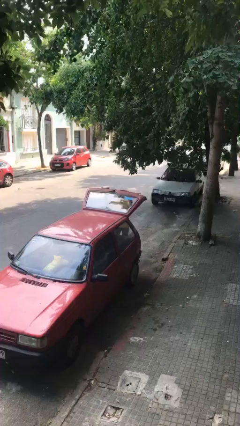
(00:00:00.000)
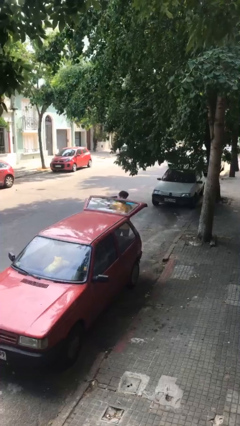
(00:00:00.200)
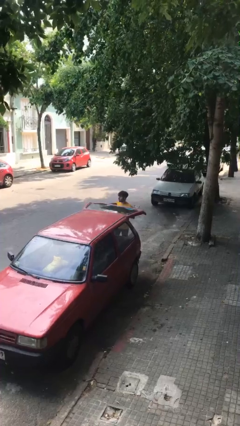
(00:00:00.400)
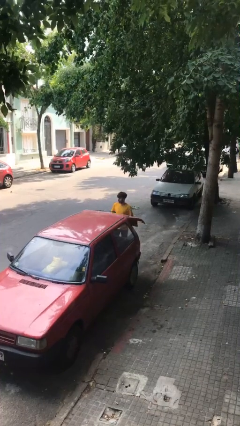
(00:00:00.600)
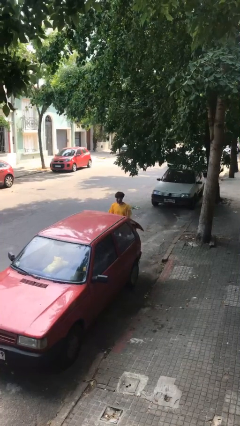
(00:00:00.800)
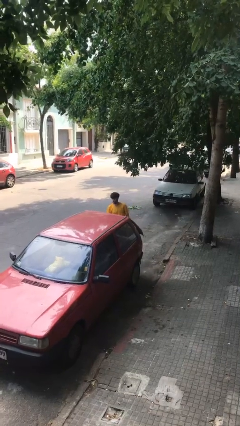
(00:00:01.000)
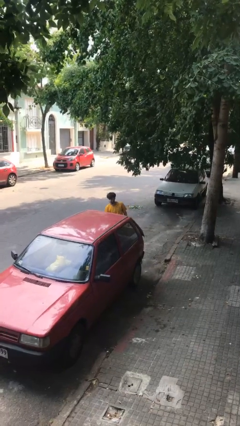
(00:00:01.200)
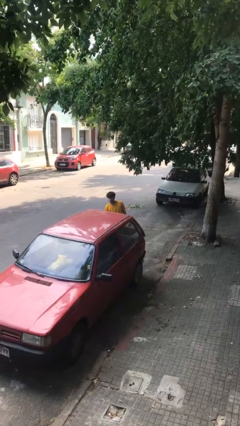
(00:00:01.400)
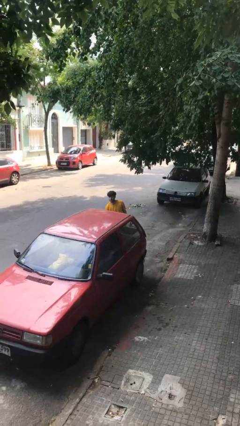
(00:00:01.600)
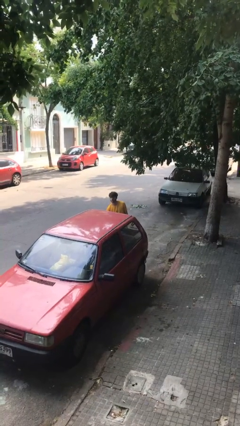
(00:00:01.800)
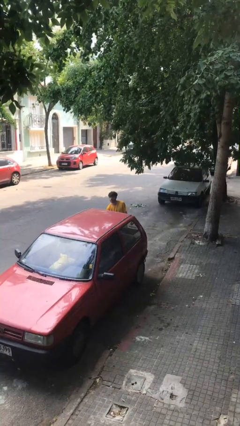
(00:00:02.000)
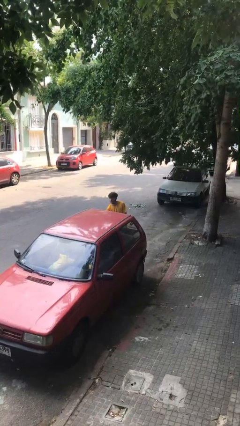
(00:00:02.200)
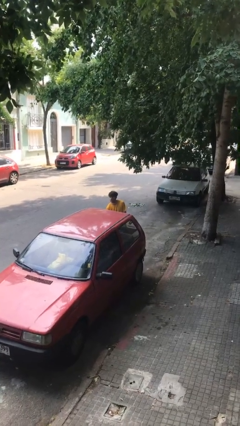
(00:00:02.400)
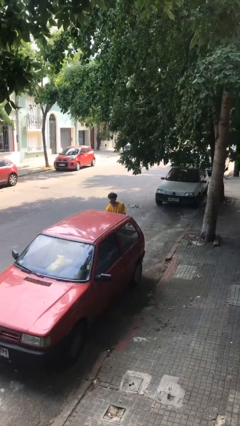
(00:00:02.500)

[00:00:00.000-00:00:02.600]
person closes car trunk

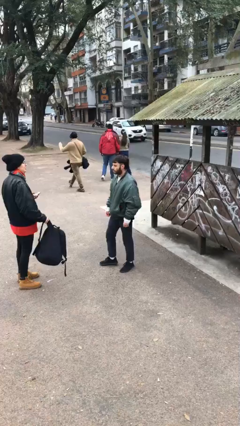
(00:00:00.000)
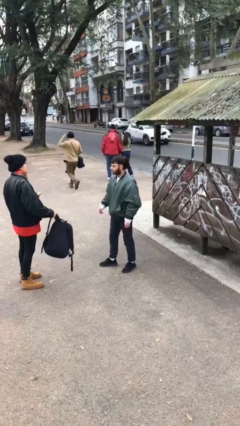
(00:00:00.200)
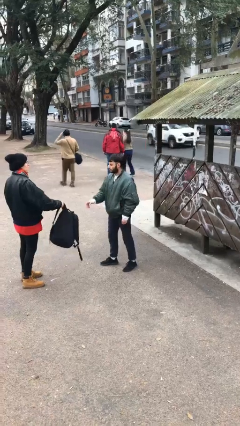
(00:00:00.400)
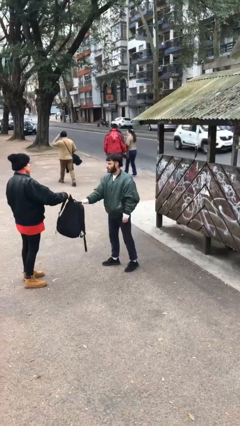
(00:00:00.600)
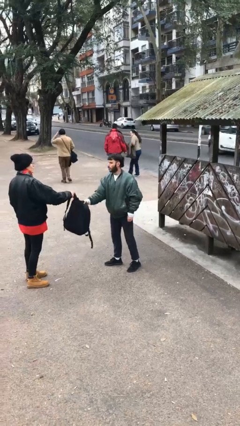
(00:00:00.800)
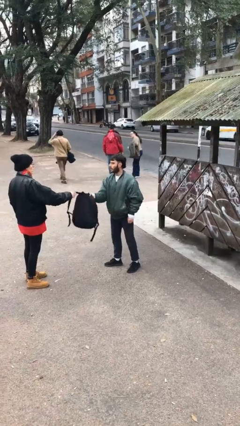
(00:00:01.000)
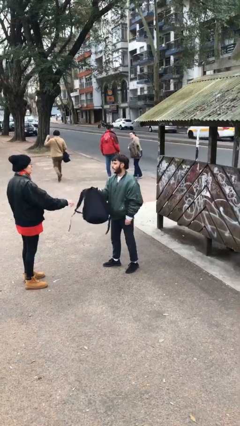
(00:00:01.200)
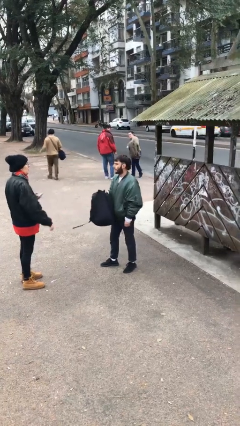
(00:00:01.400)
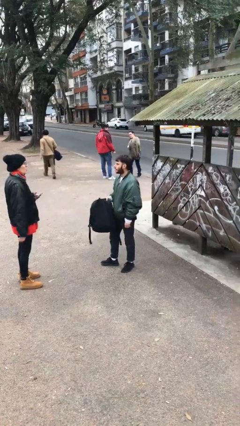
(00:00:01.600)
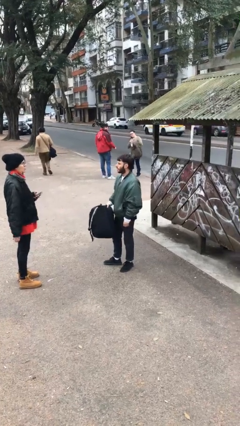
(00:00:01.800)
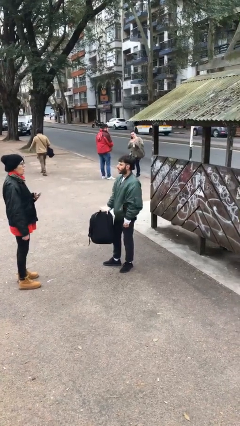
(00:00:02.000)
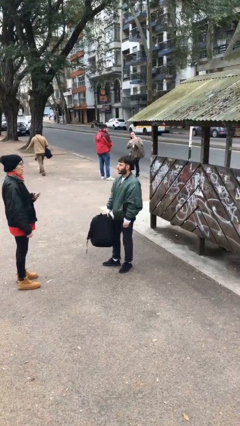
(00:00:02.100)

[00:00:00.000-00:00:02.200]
person transfers object to person

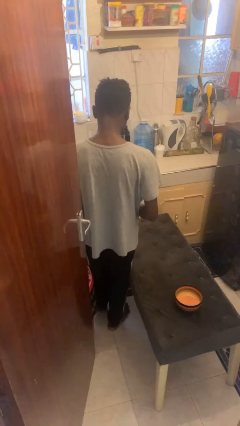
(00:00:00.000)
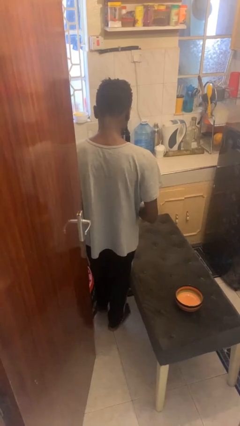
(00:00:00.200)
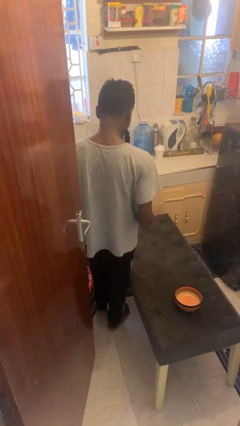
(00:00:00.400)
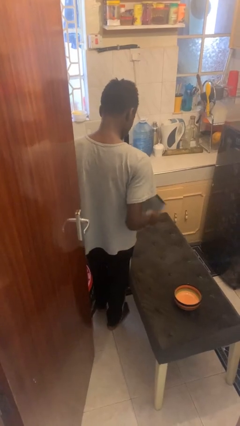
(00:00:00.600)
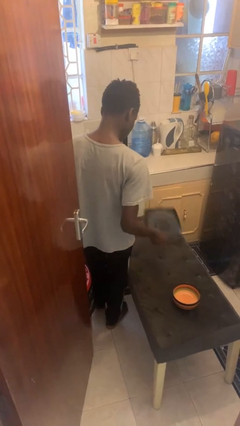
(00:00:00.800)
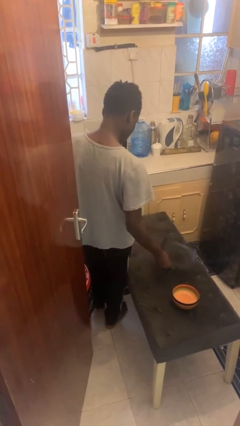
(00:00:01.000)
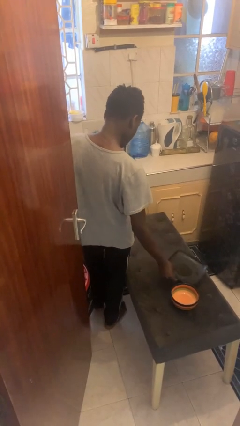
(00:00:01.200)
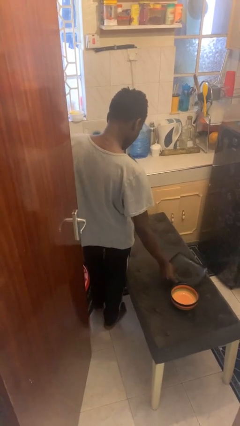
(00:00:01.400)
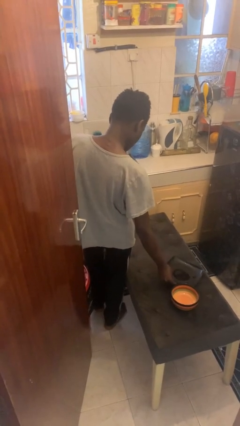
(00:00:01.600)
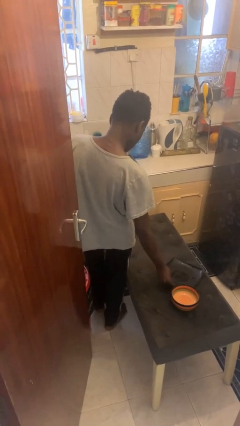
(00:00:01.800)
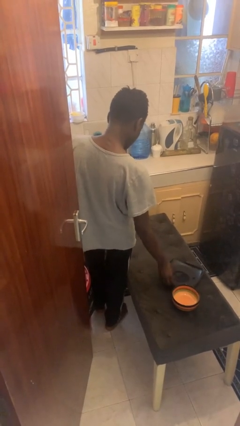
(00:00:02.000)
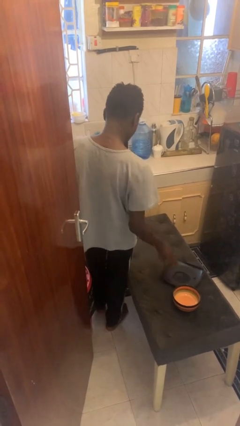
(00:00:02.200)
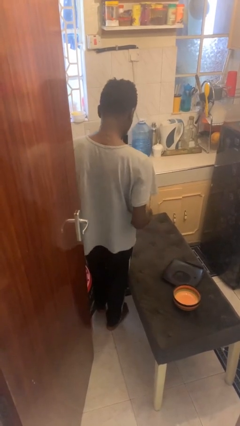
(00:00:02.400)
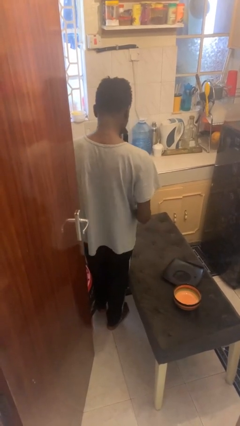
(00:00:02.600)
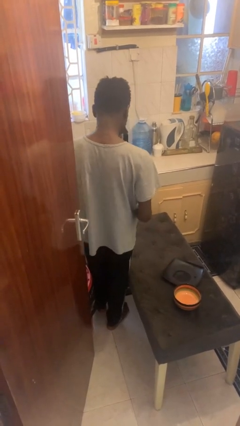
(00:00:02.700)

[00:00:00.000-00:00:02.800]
person sets table

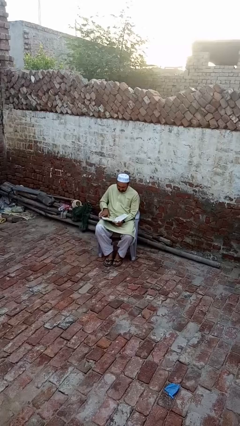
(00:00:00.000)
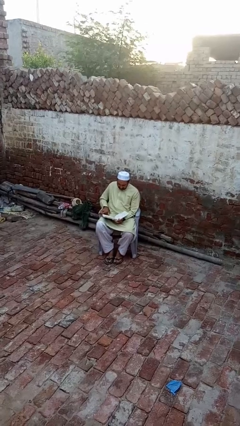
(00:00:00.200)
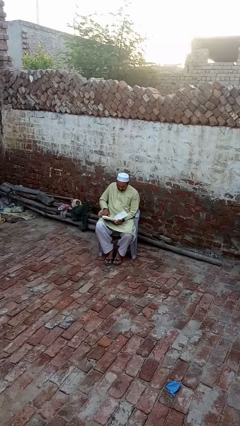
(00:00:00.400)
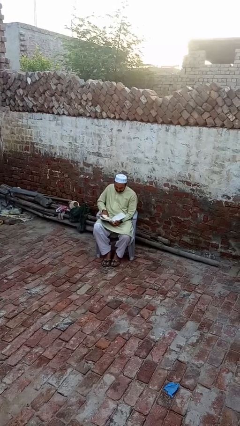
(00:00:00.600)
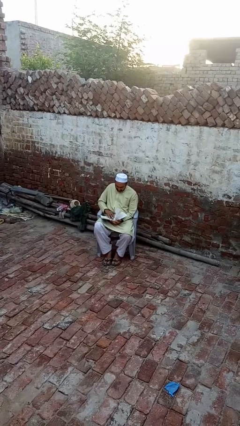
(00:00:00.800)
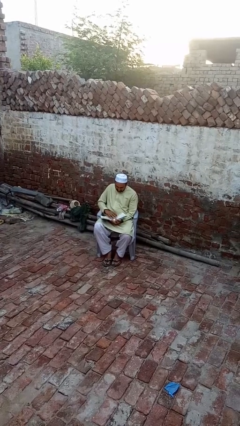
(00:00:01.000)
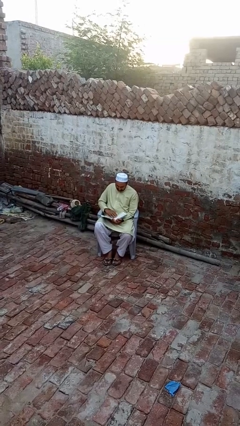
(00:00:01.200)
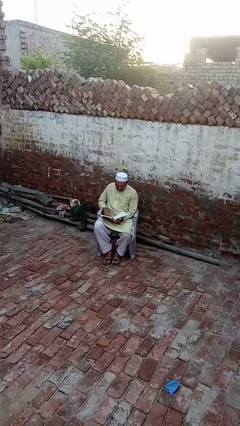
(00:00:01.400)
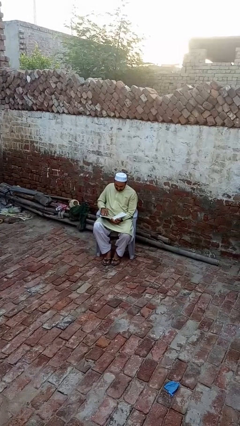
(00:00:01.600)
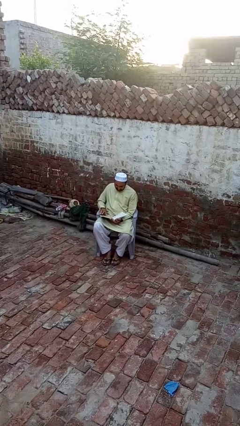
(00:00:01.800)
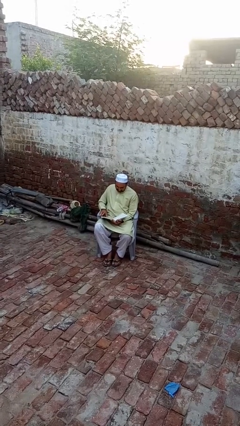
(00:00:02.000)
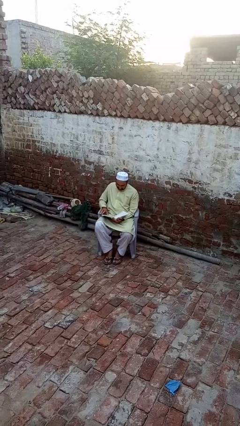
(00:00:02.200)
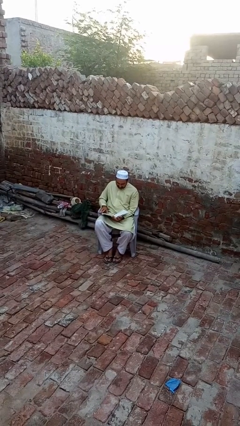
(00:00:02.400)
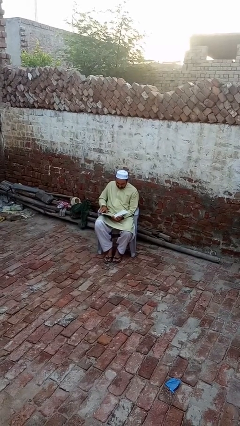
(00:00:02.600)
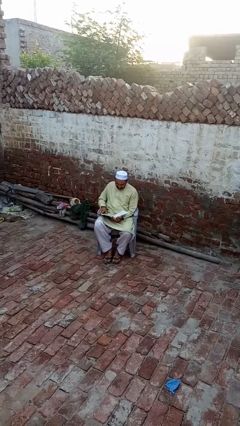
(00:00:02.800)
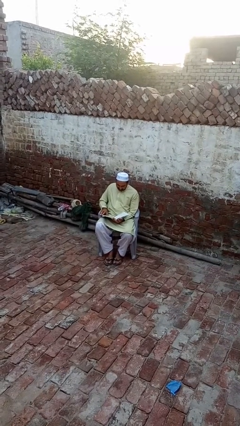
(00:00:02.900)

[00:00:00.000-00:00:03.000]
person reads book

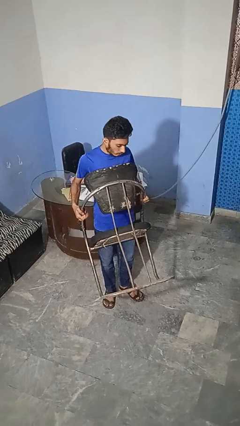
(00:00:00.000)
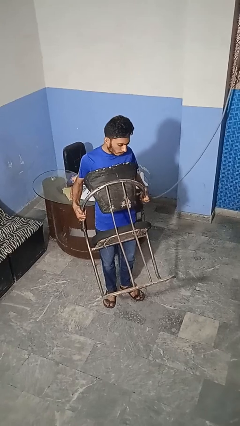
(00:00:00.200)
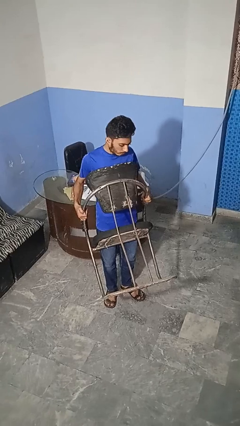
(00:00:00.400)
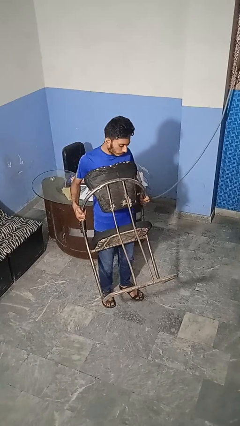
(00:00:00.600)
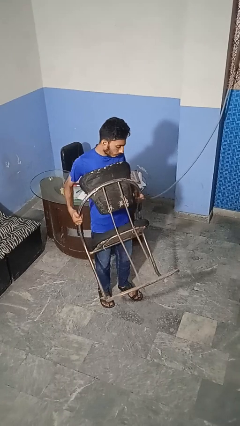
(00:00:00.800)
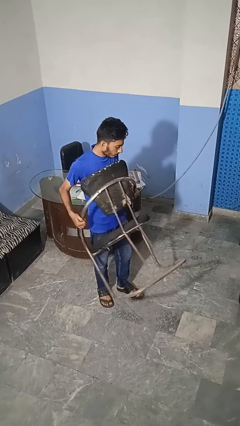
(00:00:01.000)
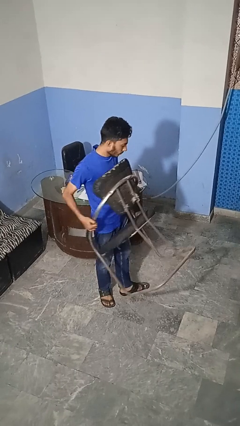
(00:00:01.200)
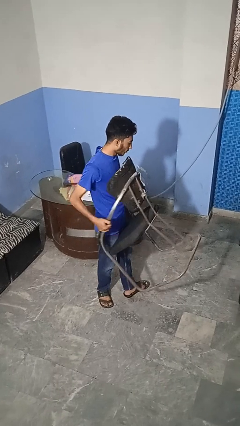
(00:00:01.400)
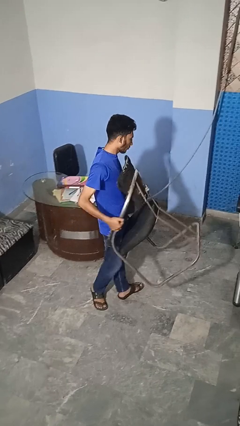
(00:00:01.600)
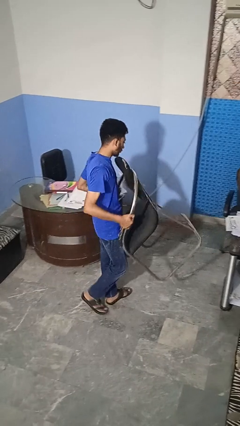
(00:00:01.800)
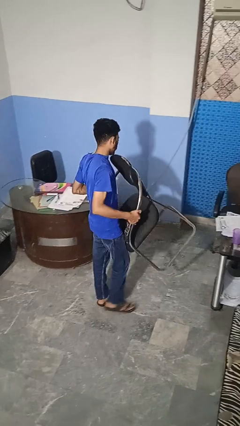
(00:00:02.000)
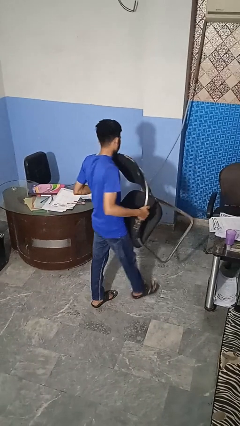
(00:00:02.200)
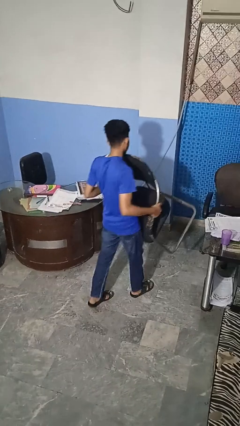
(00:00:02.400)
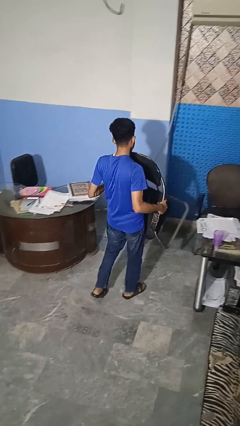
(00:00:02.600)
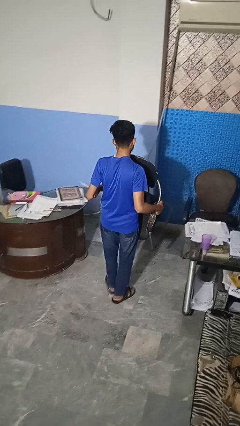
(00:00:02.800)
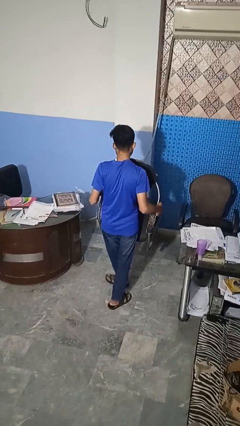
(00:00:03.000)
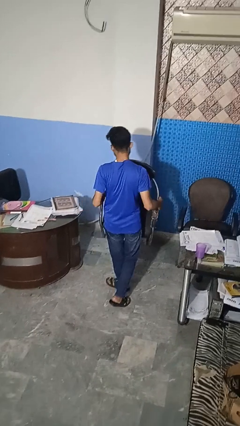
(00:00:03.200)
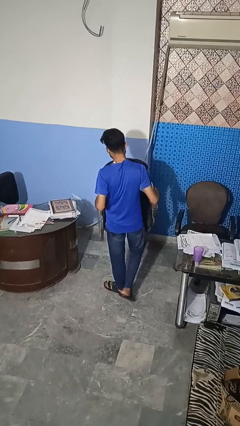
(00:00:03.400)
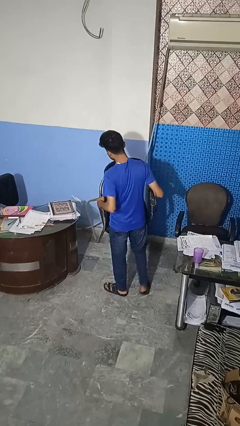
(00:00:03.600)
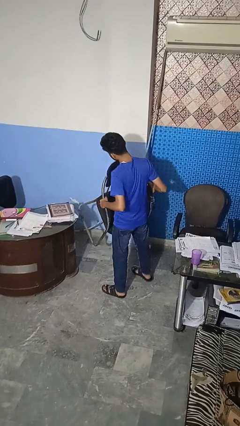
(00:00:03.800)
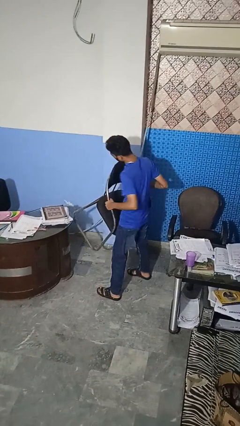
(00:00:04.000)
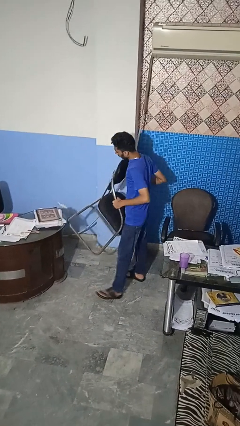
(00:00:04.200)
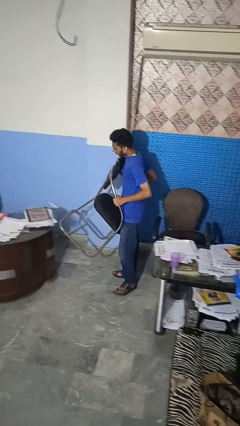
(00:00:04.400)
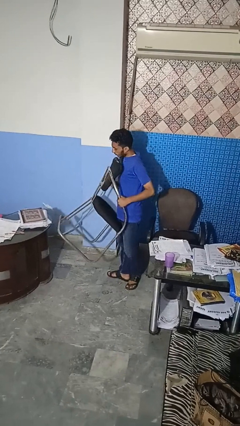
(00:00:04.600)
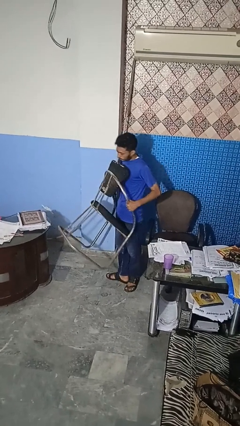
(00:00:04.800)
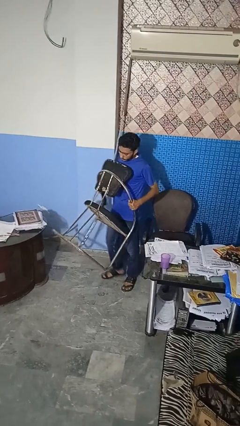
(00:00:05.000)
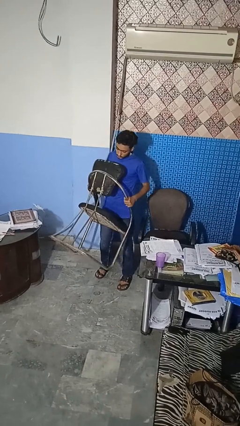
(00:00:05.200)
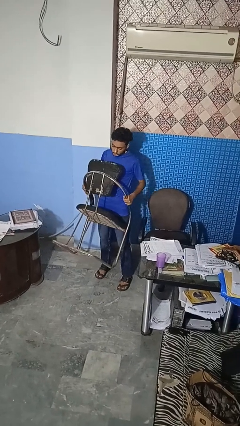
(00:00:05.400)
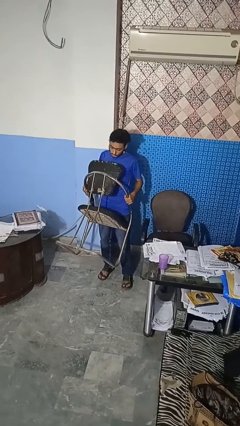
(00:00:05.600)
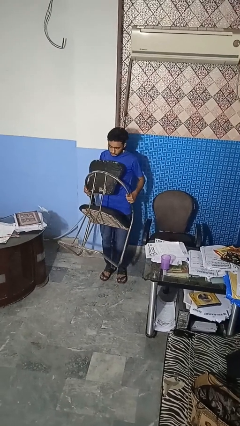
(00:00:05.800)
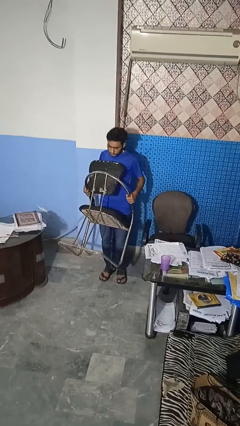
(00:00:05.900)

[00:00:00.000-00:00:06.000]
person carries furniture

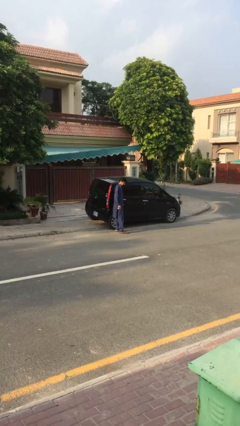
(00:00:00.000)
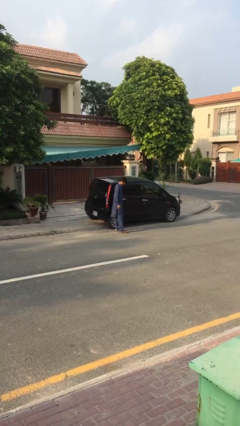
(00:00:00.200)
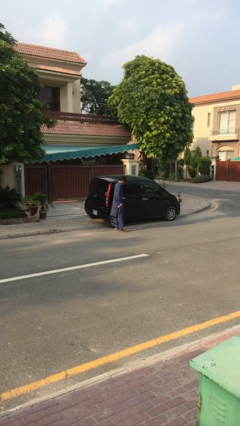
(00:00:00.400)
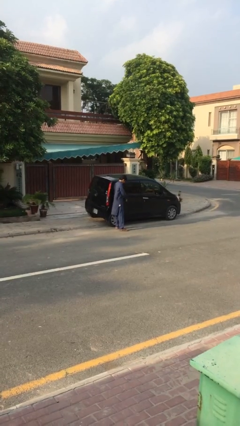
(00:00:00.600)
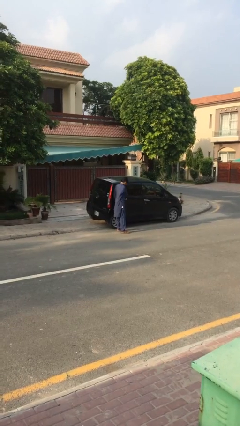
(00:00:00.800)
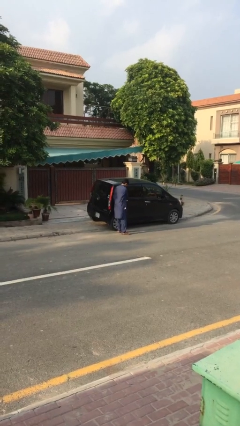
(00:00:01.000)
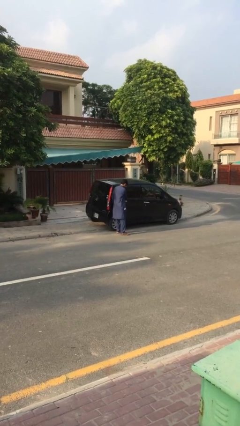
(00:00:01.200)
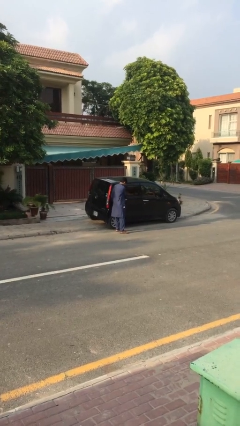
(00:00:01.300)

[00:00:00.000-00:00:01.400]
person opens car door
